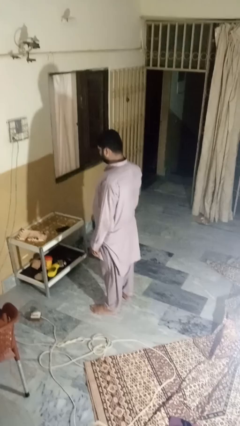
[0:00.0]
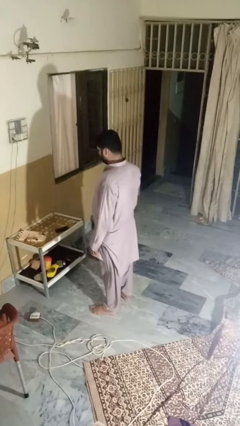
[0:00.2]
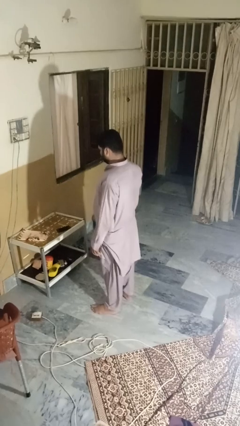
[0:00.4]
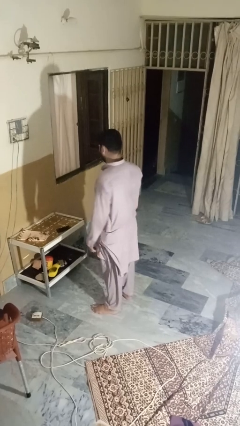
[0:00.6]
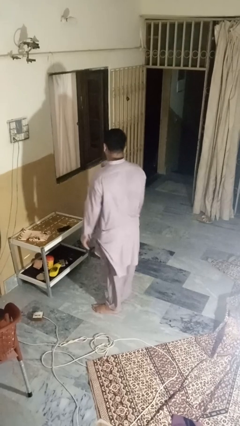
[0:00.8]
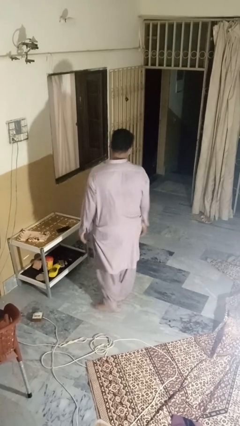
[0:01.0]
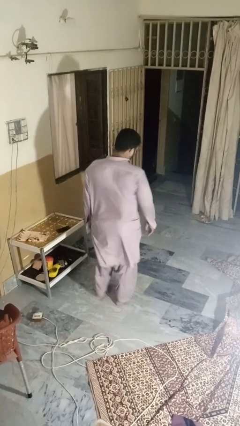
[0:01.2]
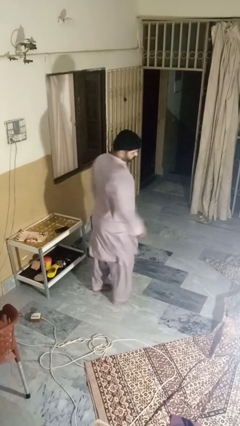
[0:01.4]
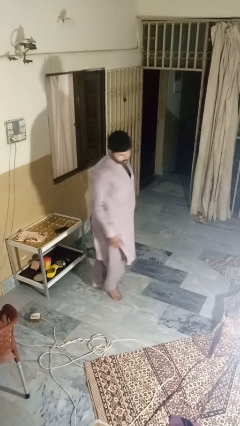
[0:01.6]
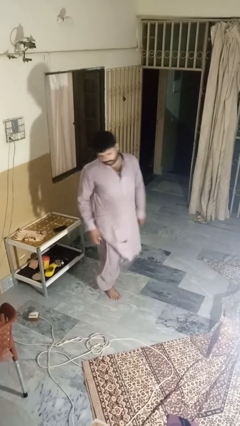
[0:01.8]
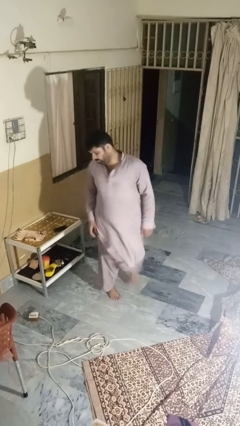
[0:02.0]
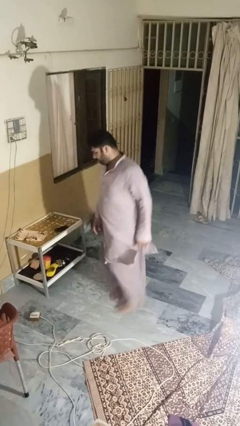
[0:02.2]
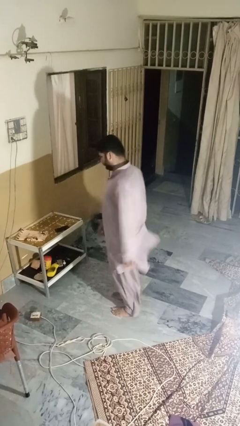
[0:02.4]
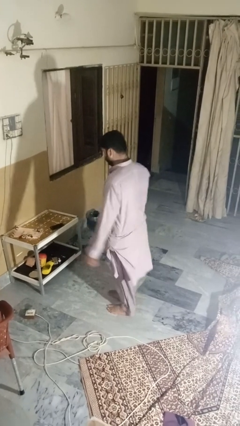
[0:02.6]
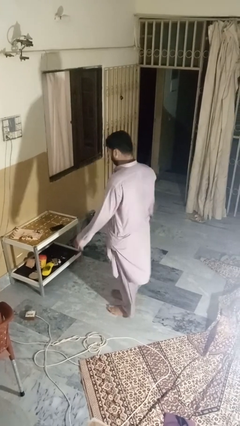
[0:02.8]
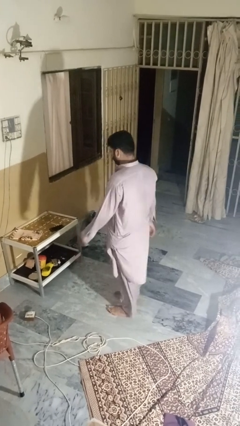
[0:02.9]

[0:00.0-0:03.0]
person twirls

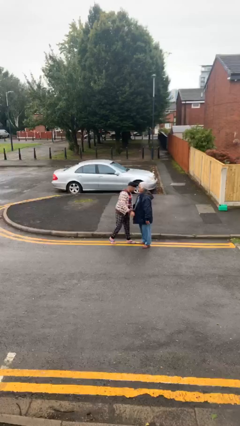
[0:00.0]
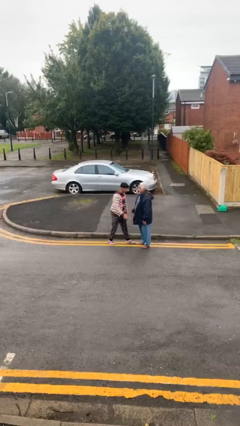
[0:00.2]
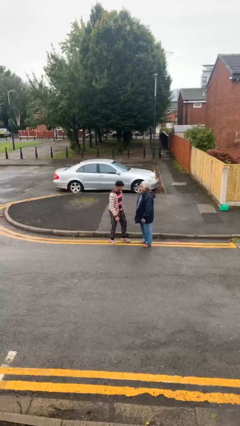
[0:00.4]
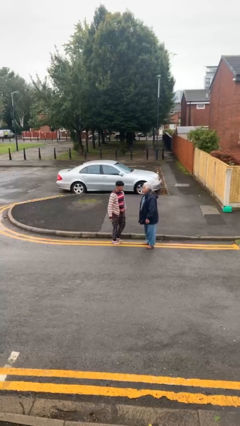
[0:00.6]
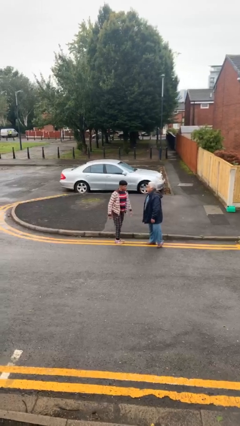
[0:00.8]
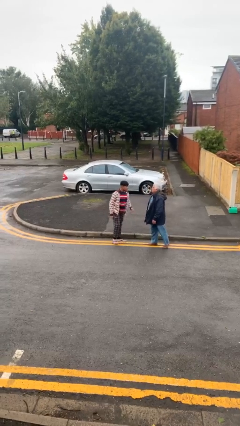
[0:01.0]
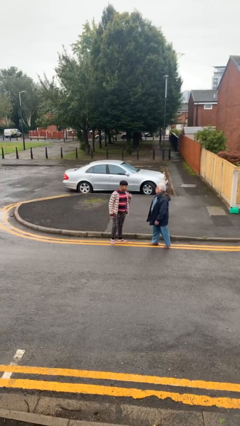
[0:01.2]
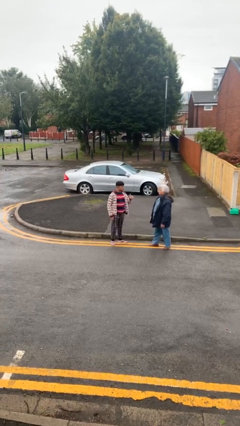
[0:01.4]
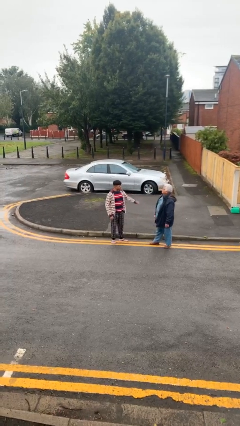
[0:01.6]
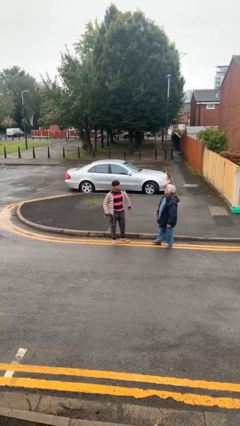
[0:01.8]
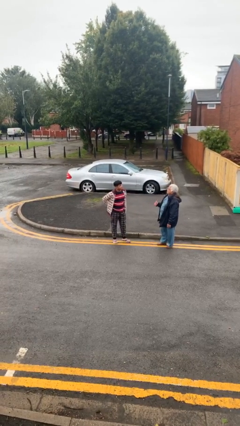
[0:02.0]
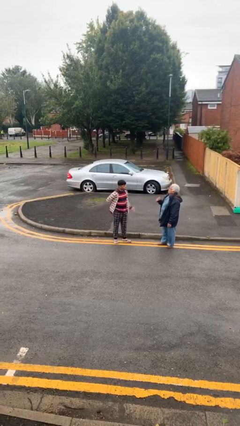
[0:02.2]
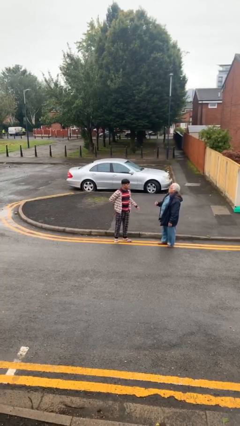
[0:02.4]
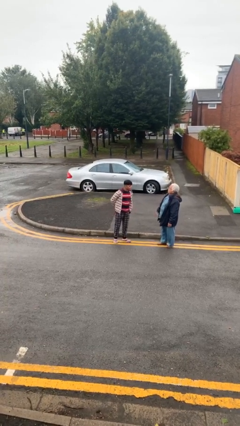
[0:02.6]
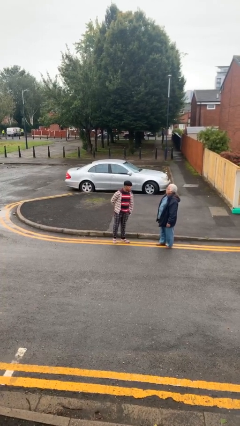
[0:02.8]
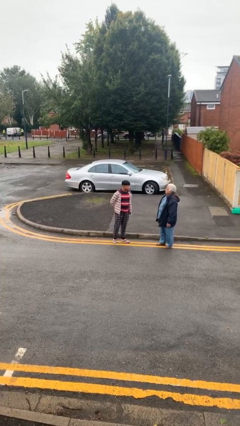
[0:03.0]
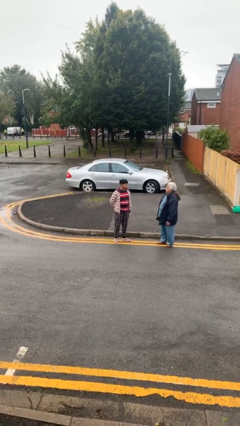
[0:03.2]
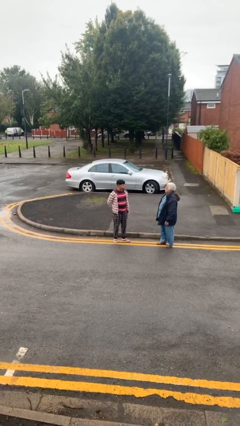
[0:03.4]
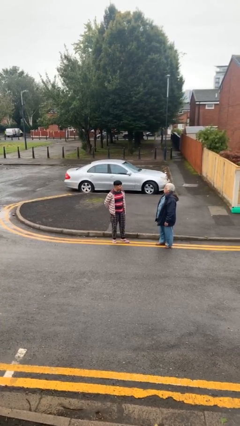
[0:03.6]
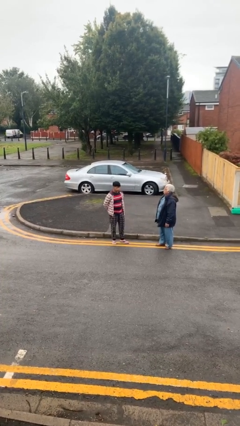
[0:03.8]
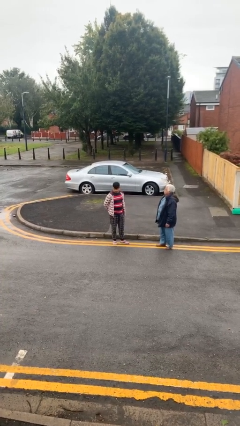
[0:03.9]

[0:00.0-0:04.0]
person talks to person

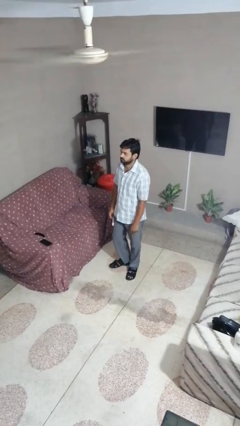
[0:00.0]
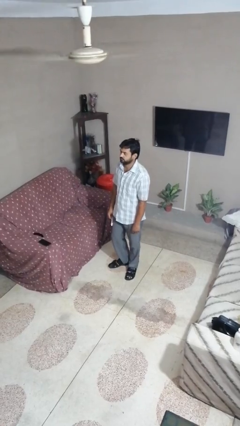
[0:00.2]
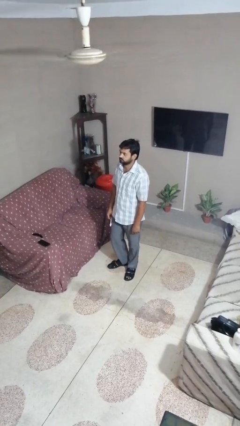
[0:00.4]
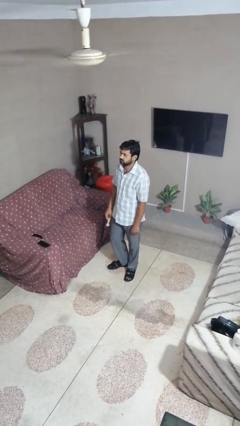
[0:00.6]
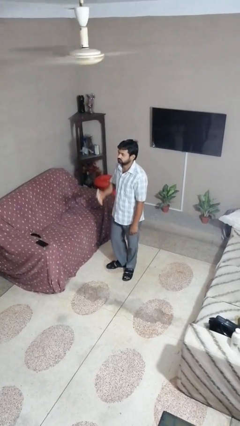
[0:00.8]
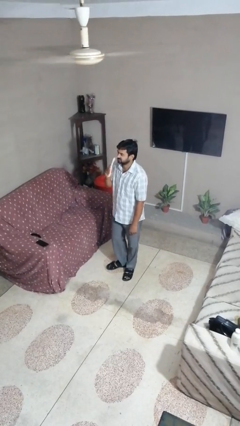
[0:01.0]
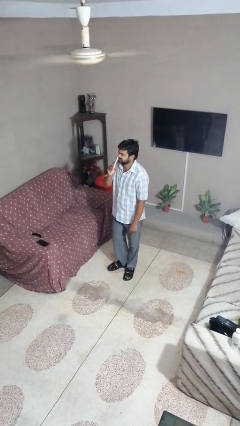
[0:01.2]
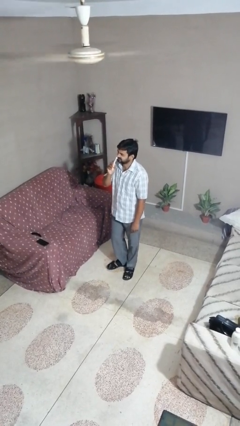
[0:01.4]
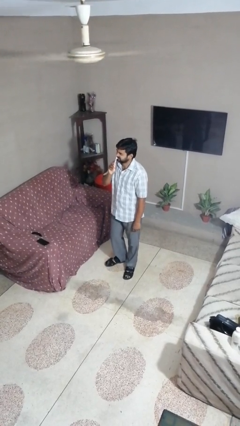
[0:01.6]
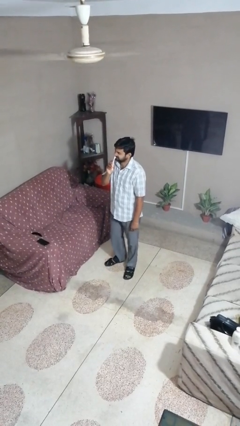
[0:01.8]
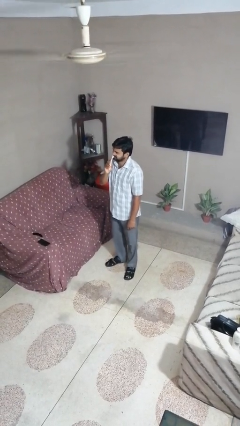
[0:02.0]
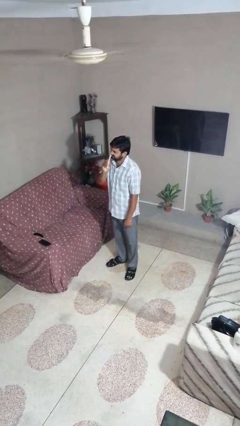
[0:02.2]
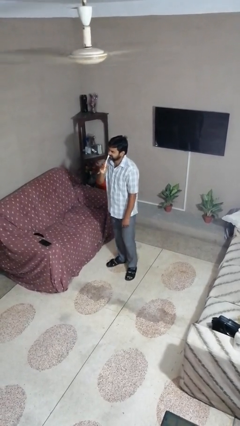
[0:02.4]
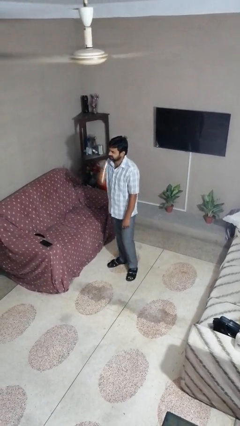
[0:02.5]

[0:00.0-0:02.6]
person brushes teeth

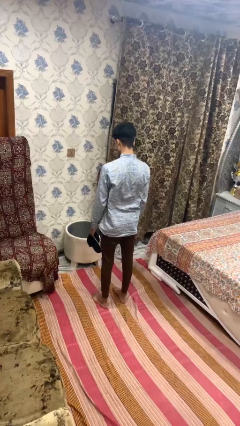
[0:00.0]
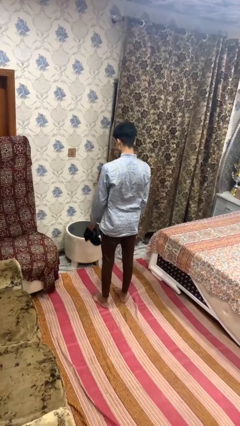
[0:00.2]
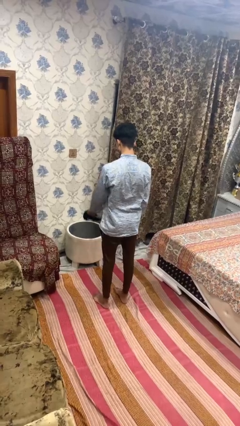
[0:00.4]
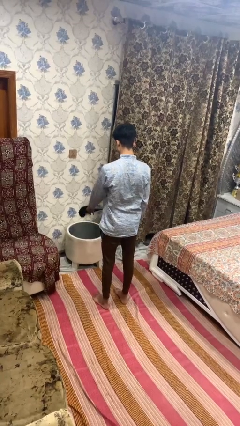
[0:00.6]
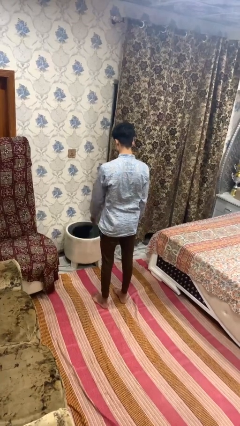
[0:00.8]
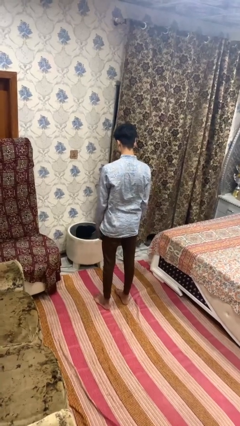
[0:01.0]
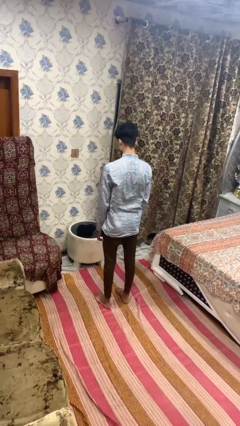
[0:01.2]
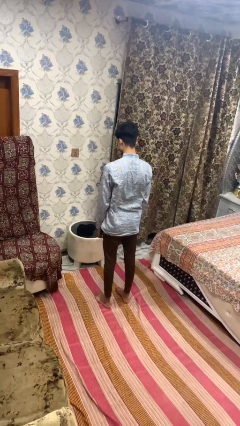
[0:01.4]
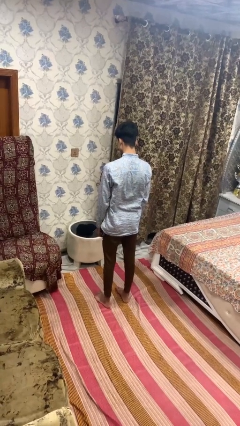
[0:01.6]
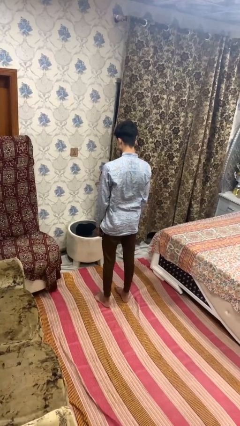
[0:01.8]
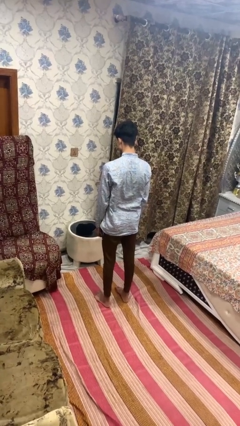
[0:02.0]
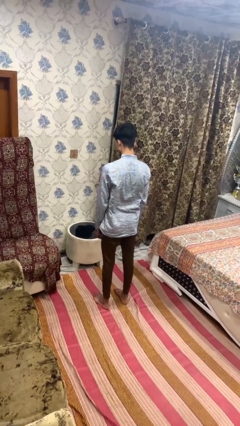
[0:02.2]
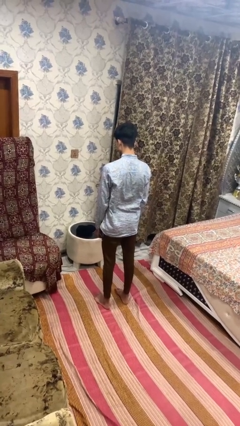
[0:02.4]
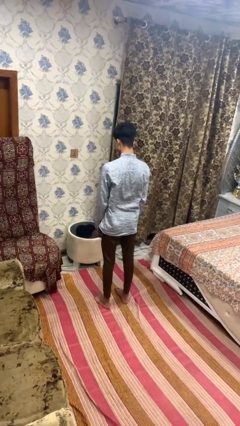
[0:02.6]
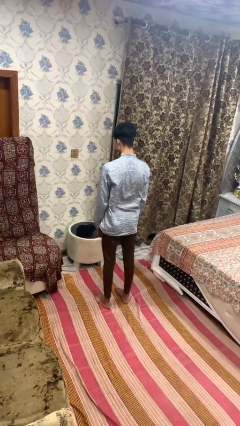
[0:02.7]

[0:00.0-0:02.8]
person throws object on table

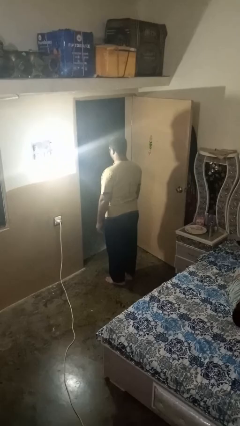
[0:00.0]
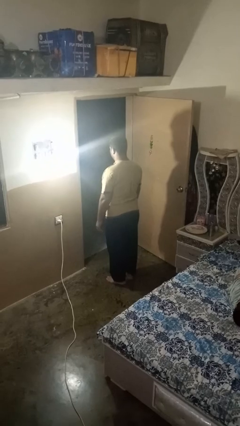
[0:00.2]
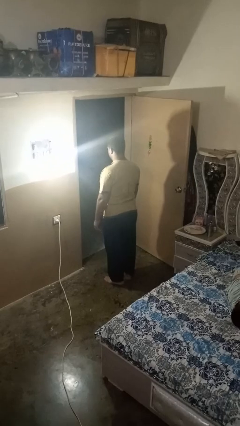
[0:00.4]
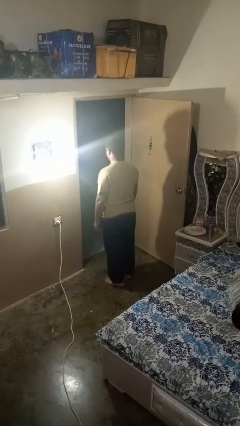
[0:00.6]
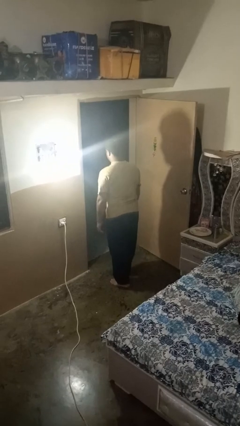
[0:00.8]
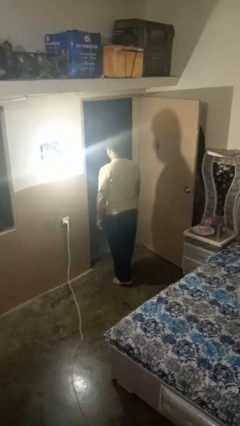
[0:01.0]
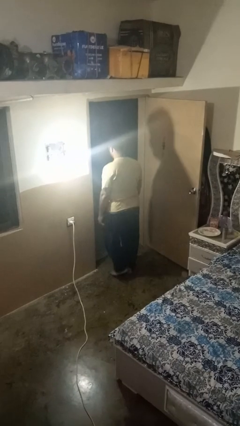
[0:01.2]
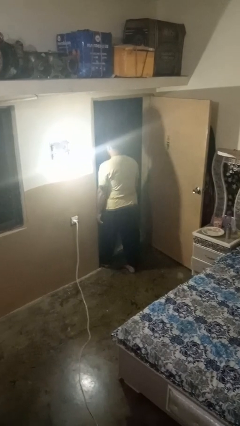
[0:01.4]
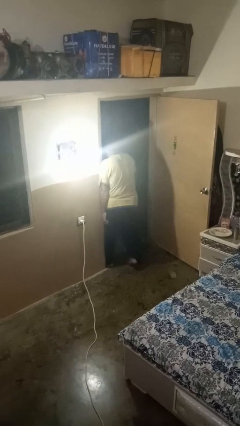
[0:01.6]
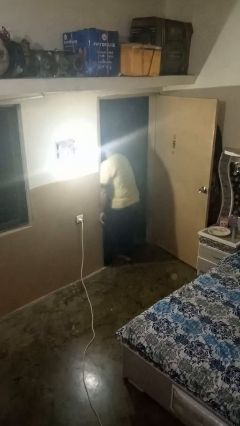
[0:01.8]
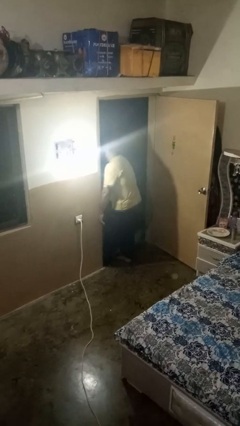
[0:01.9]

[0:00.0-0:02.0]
person bumps into wall

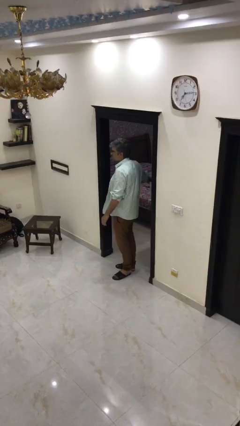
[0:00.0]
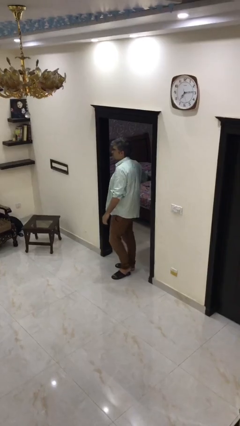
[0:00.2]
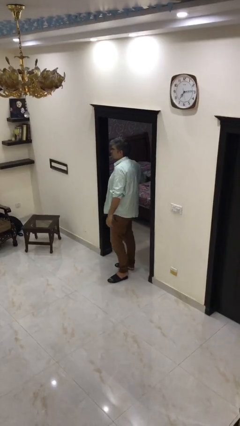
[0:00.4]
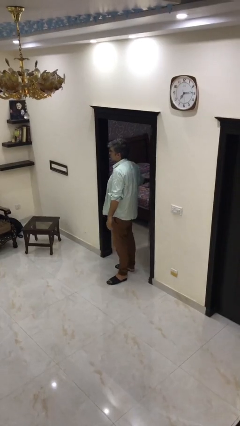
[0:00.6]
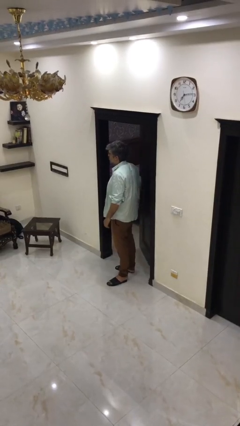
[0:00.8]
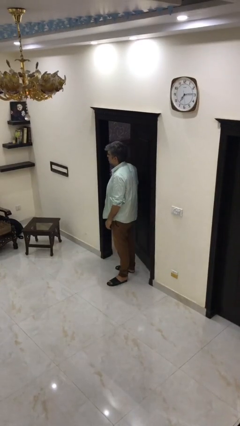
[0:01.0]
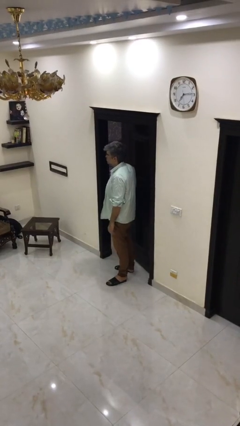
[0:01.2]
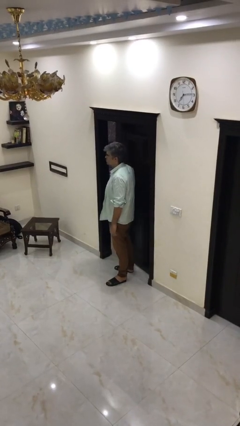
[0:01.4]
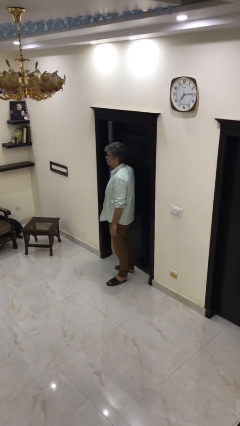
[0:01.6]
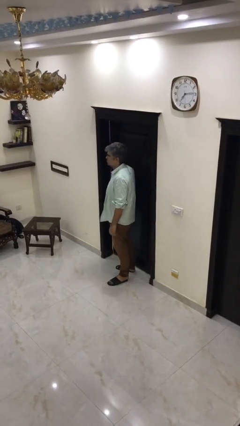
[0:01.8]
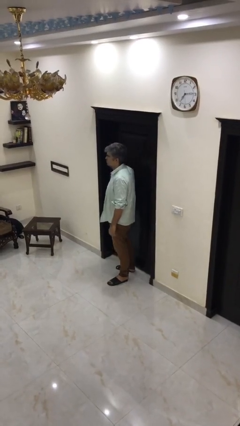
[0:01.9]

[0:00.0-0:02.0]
person closes facility door

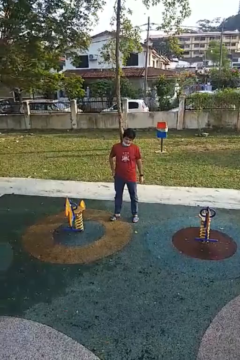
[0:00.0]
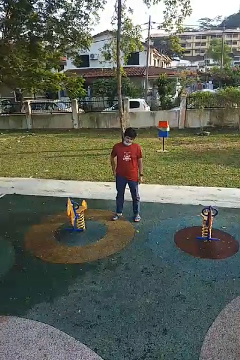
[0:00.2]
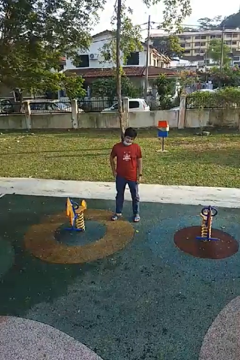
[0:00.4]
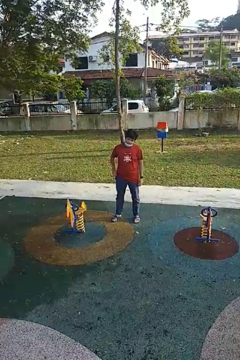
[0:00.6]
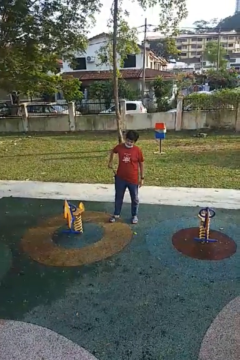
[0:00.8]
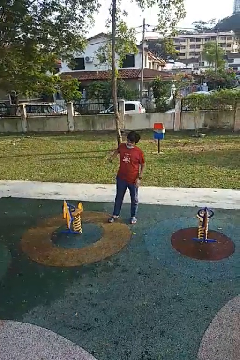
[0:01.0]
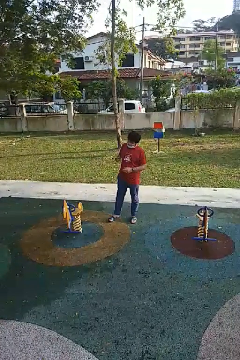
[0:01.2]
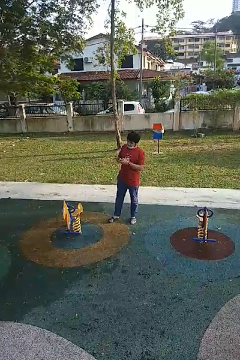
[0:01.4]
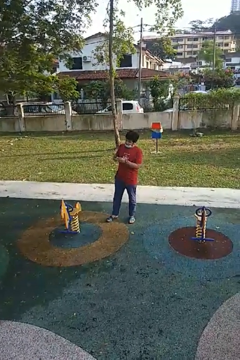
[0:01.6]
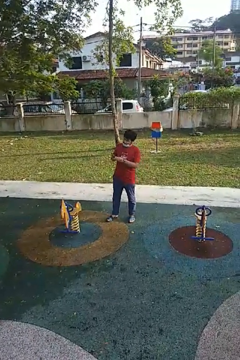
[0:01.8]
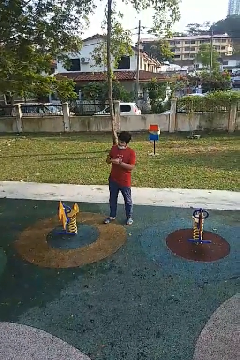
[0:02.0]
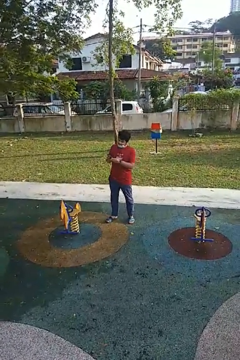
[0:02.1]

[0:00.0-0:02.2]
person takes phone from pocket
